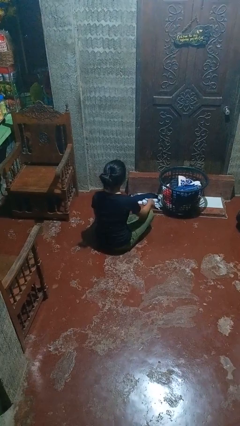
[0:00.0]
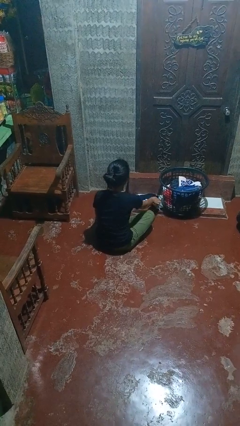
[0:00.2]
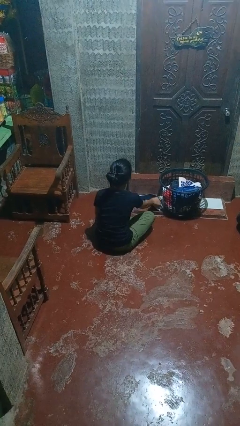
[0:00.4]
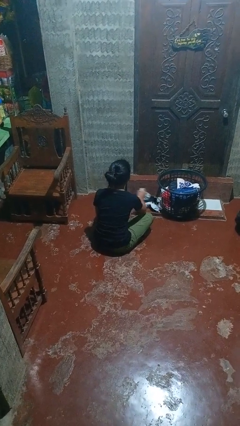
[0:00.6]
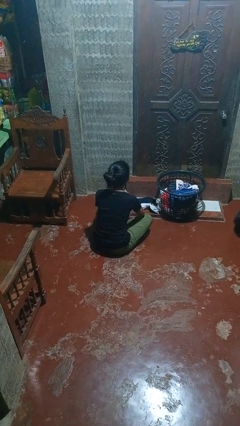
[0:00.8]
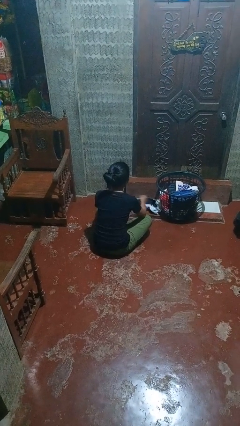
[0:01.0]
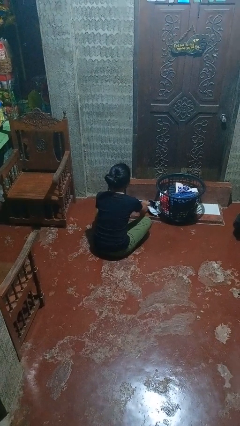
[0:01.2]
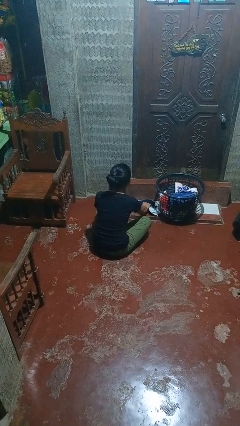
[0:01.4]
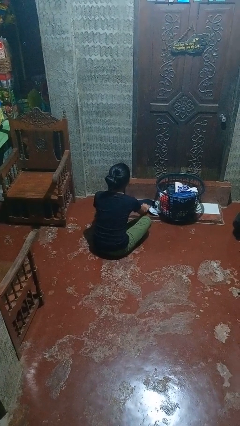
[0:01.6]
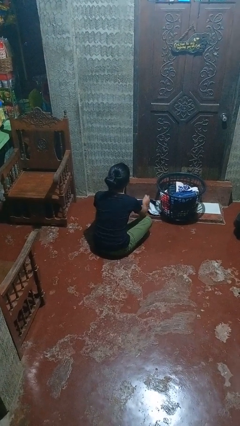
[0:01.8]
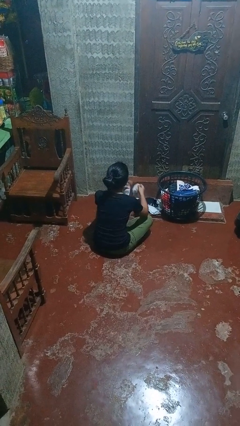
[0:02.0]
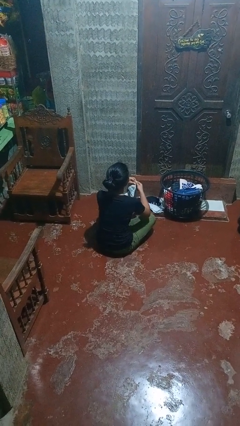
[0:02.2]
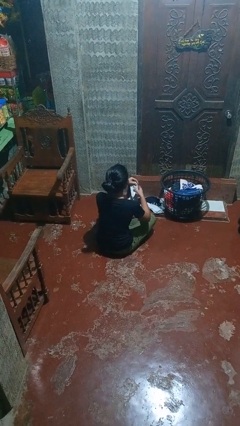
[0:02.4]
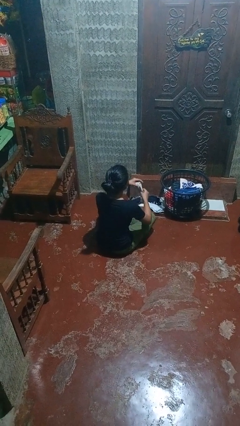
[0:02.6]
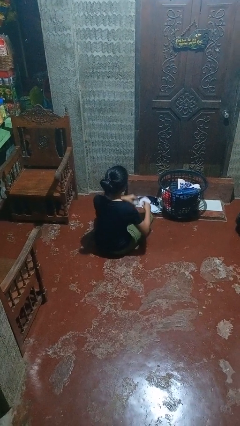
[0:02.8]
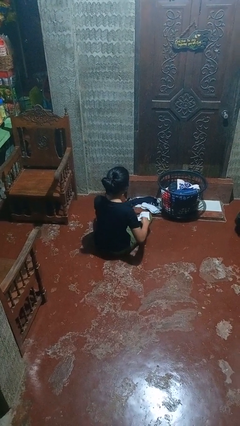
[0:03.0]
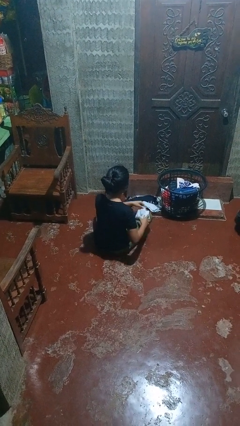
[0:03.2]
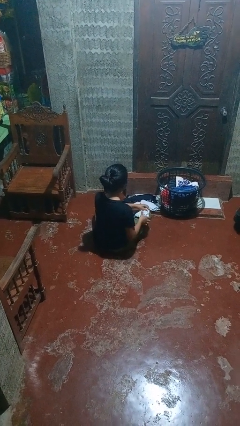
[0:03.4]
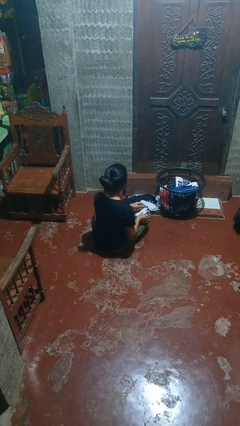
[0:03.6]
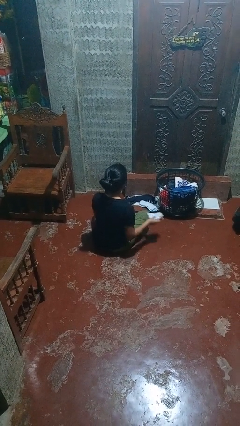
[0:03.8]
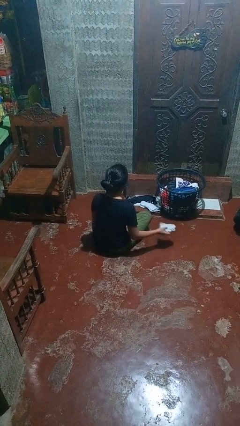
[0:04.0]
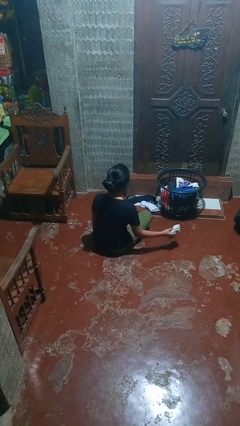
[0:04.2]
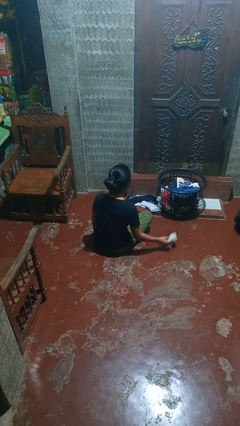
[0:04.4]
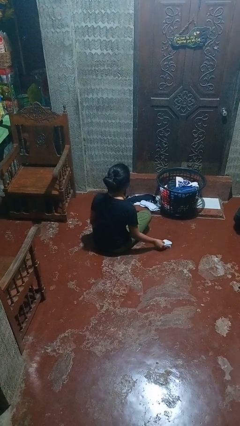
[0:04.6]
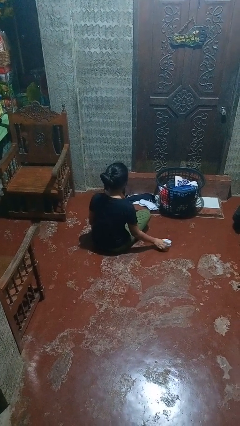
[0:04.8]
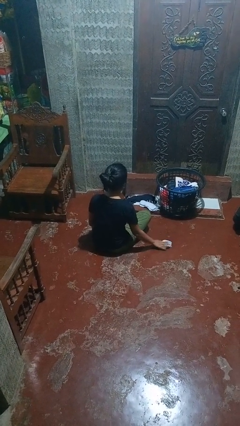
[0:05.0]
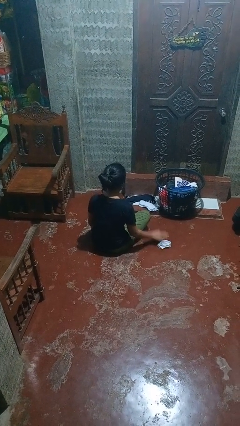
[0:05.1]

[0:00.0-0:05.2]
person folds socks

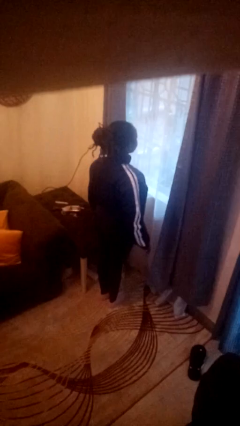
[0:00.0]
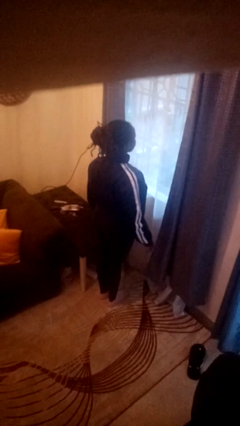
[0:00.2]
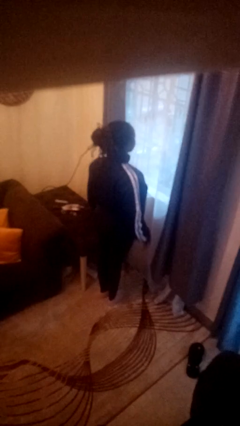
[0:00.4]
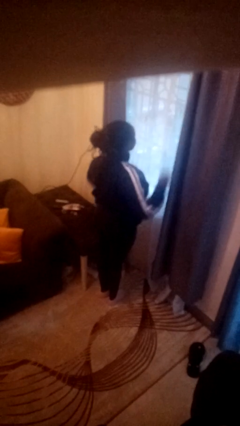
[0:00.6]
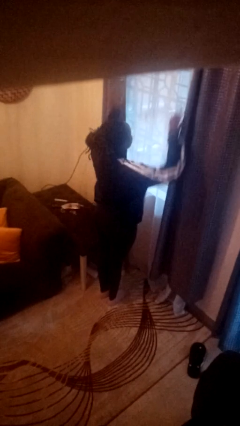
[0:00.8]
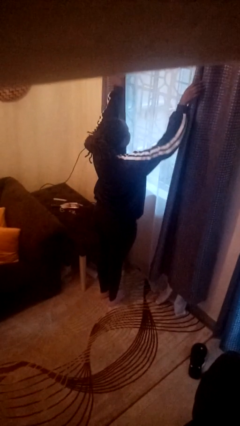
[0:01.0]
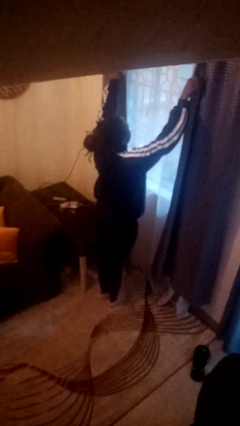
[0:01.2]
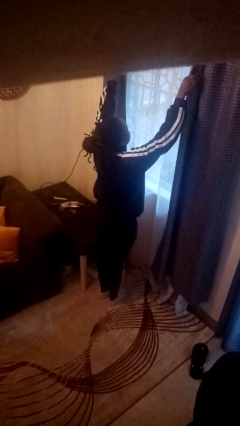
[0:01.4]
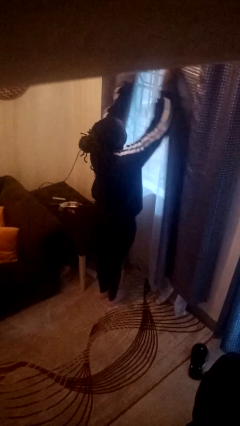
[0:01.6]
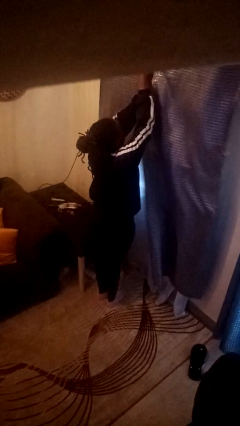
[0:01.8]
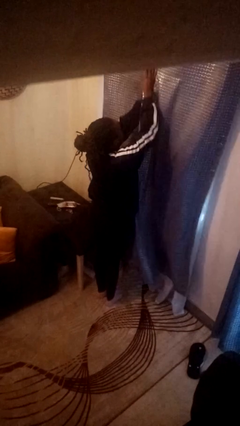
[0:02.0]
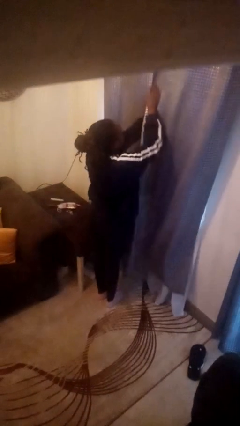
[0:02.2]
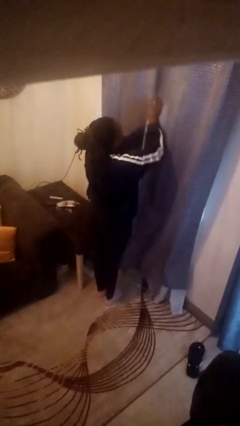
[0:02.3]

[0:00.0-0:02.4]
person closes curtains

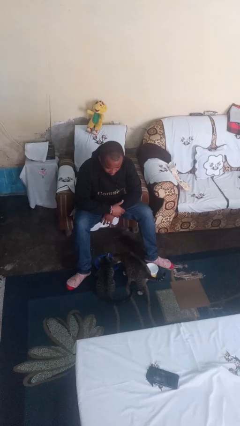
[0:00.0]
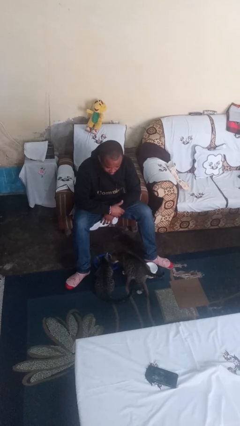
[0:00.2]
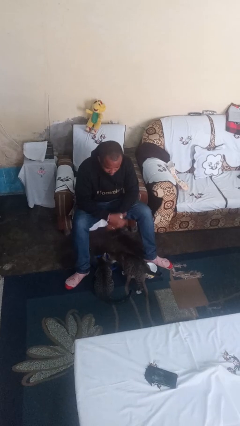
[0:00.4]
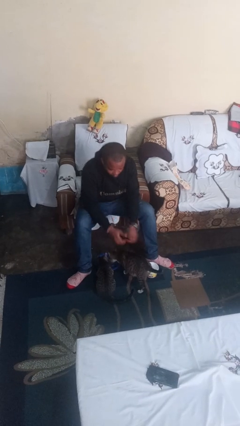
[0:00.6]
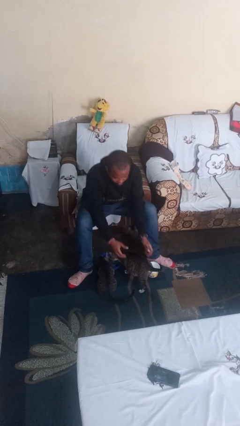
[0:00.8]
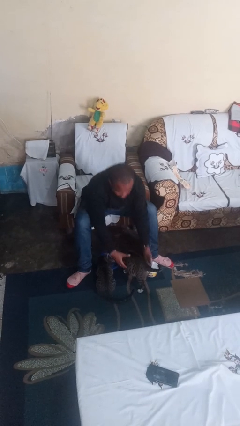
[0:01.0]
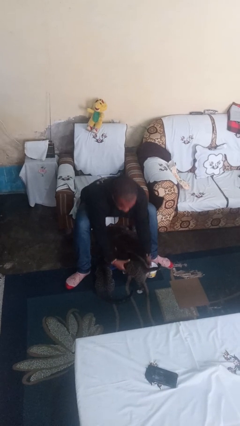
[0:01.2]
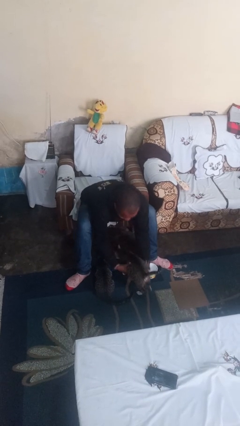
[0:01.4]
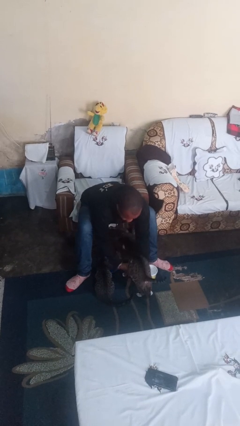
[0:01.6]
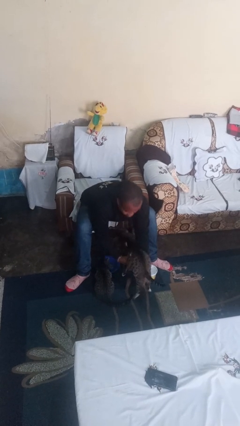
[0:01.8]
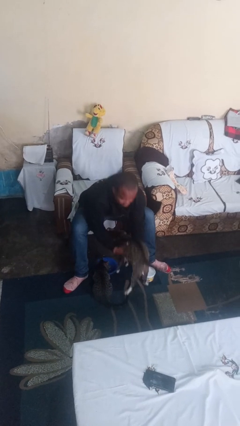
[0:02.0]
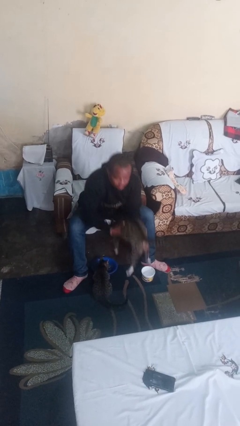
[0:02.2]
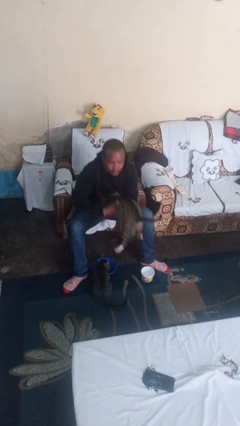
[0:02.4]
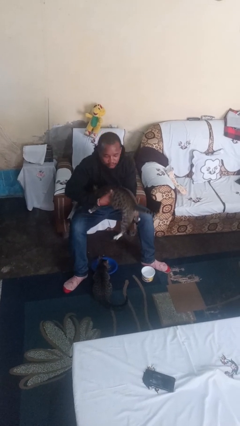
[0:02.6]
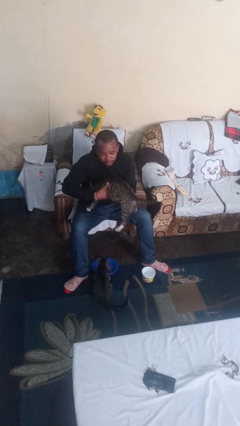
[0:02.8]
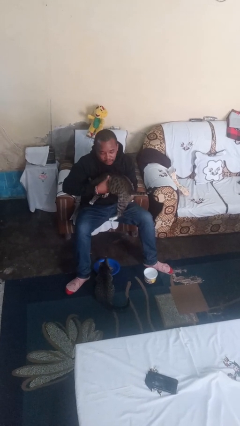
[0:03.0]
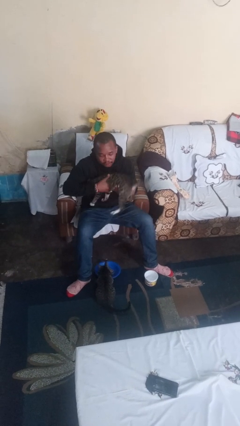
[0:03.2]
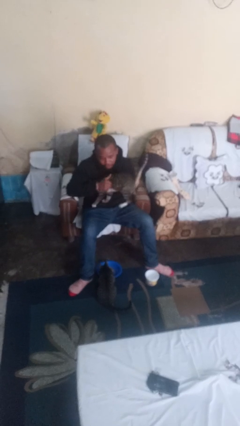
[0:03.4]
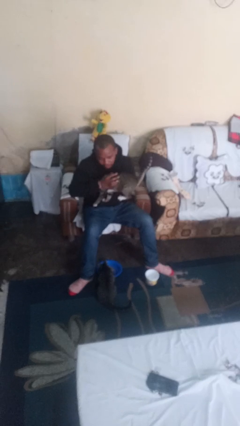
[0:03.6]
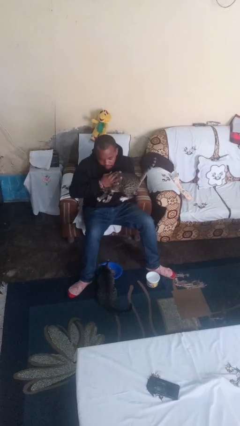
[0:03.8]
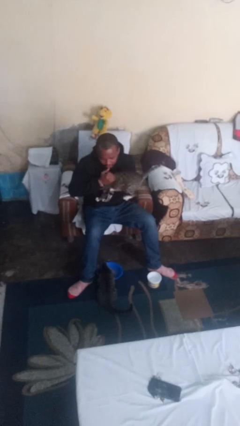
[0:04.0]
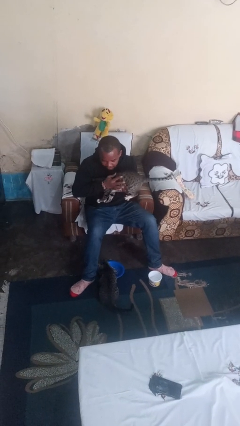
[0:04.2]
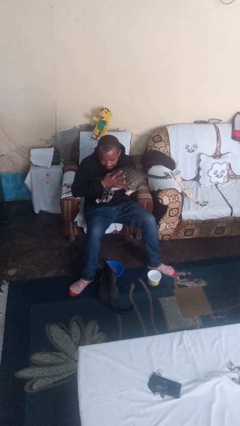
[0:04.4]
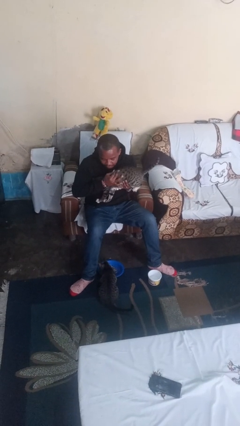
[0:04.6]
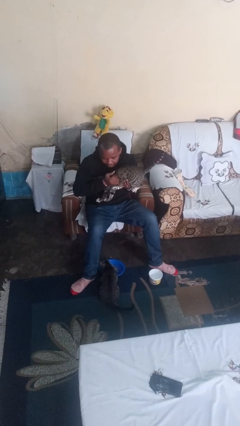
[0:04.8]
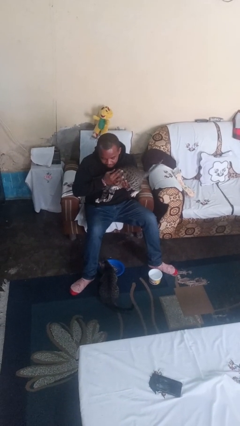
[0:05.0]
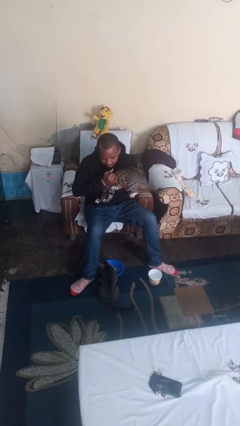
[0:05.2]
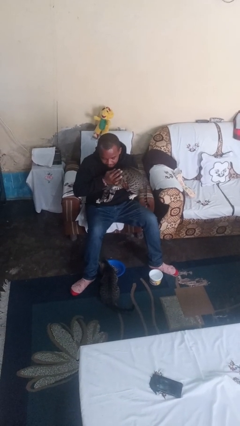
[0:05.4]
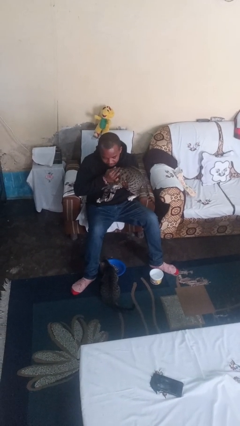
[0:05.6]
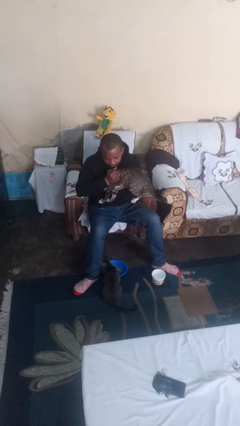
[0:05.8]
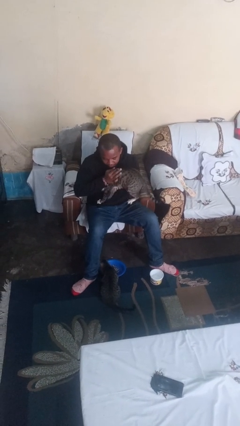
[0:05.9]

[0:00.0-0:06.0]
person hugs cat

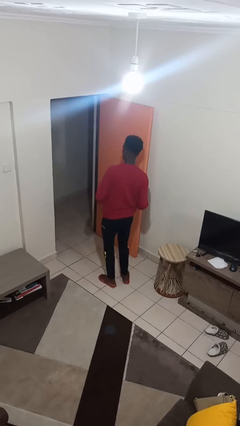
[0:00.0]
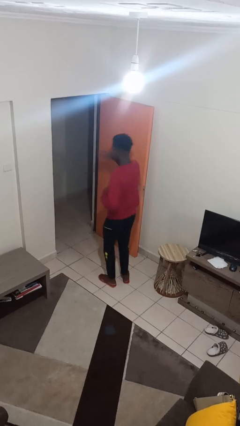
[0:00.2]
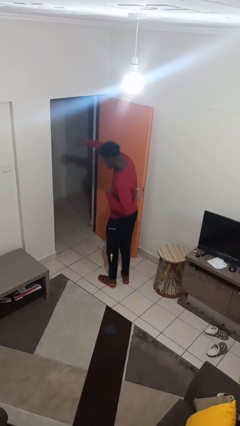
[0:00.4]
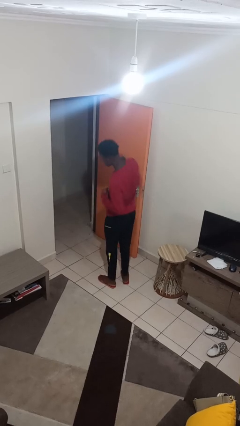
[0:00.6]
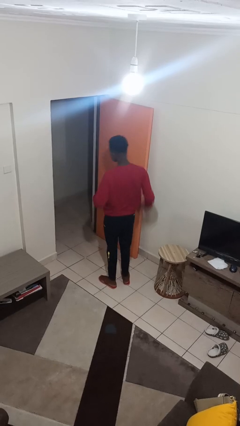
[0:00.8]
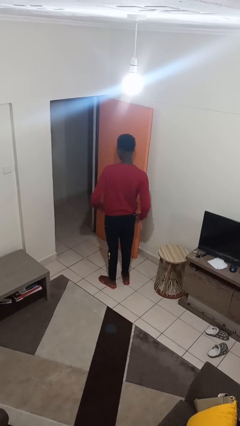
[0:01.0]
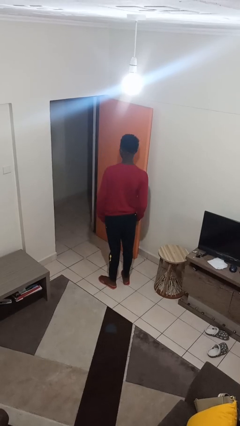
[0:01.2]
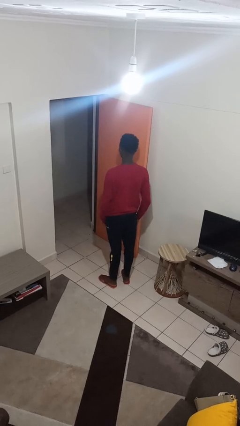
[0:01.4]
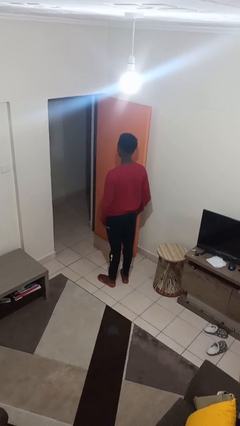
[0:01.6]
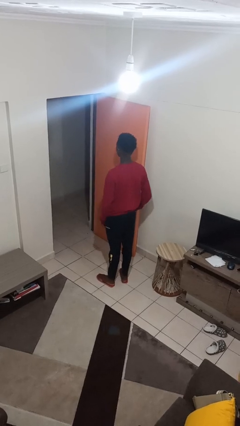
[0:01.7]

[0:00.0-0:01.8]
person punches

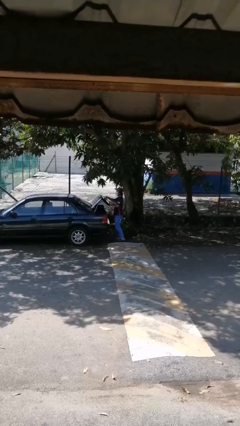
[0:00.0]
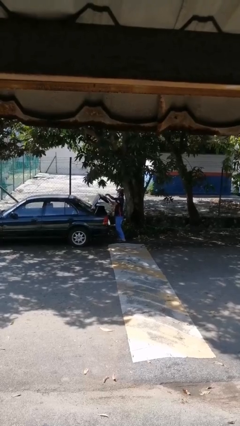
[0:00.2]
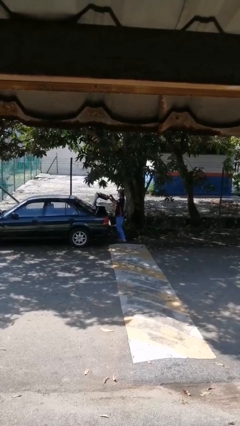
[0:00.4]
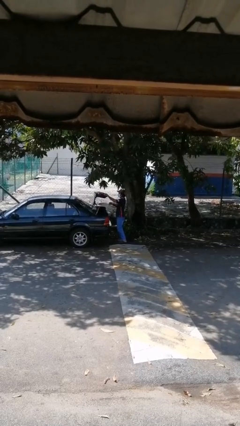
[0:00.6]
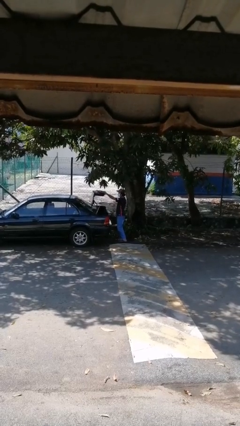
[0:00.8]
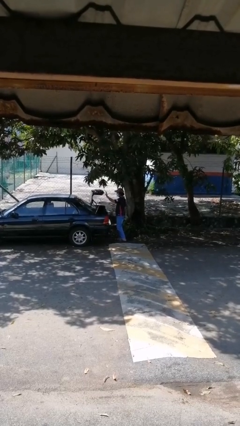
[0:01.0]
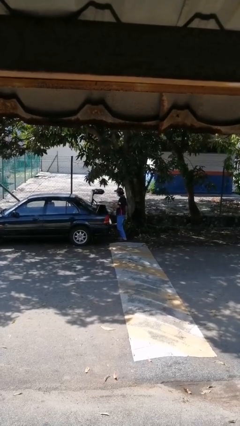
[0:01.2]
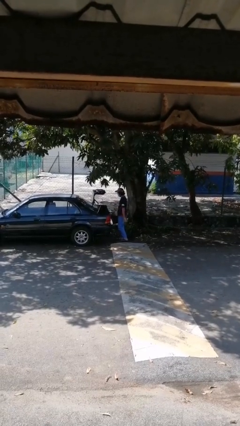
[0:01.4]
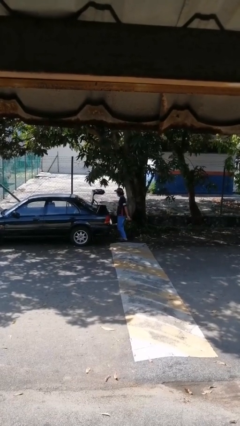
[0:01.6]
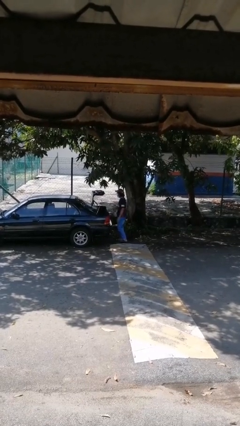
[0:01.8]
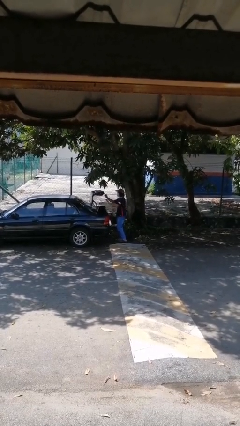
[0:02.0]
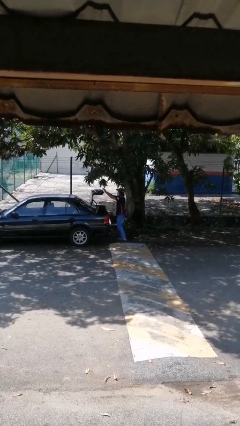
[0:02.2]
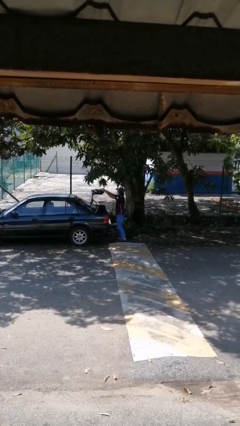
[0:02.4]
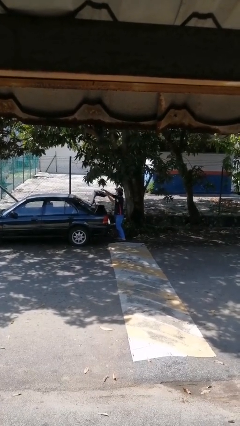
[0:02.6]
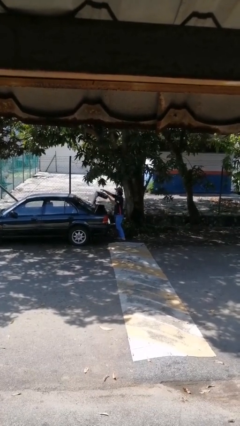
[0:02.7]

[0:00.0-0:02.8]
person opens car trunk
